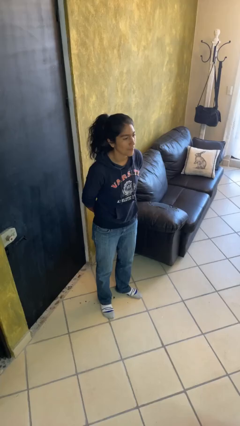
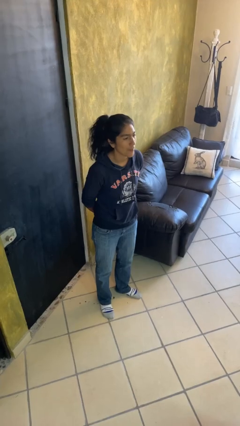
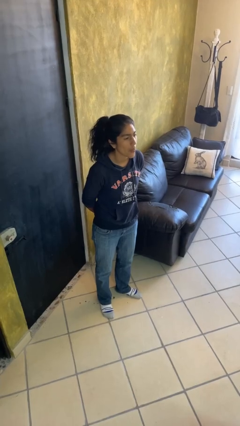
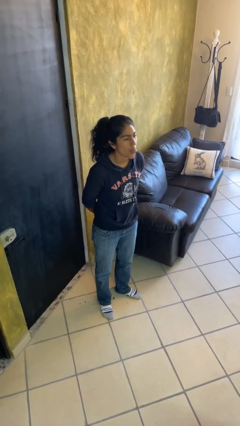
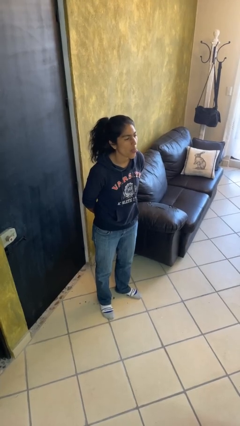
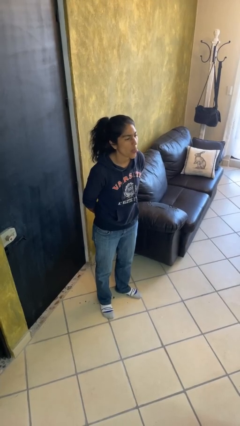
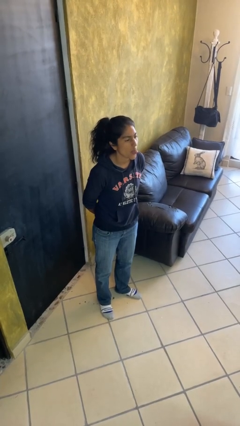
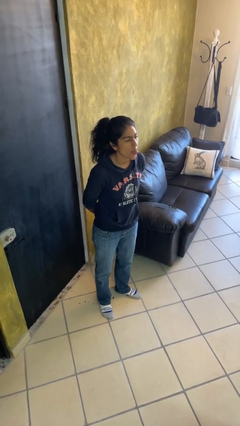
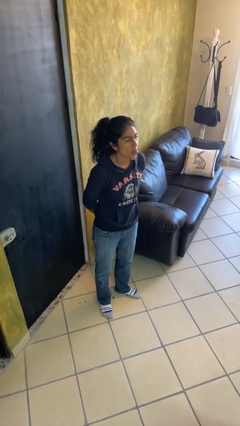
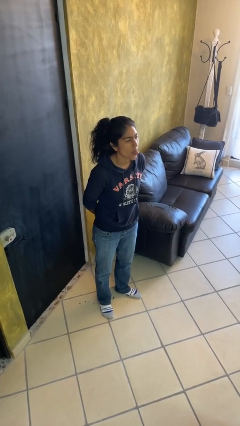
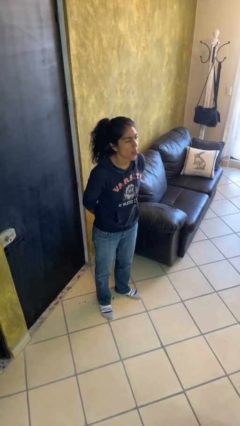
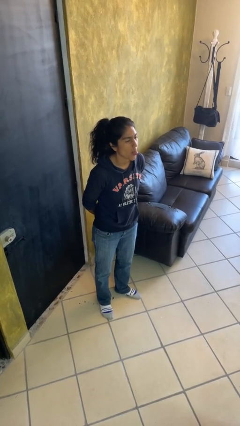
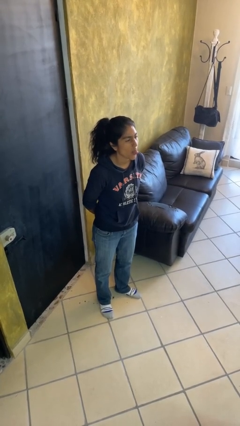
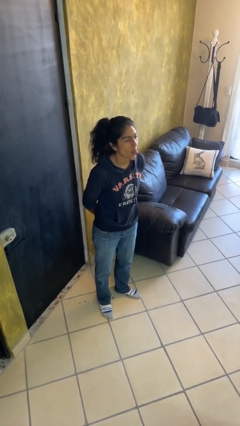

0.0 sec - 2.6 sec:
person sticks out tongue

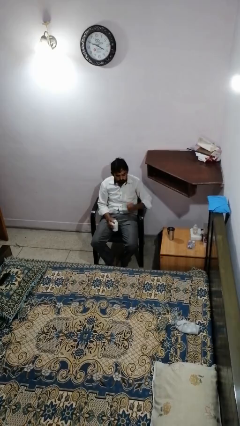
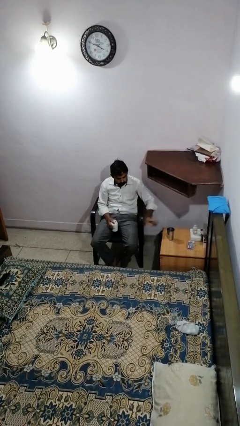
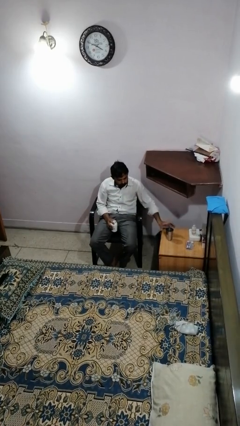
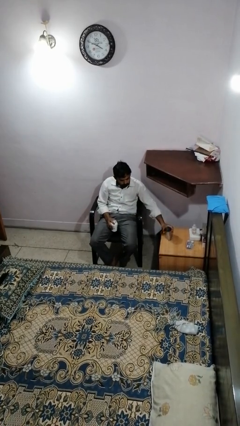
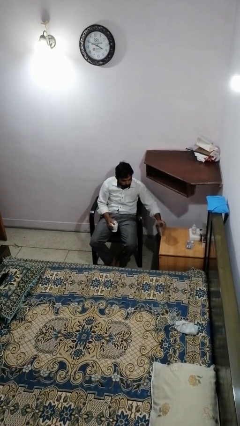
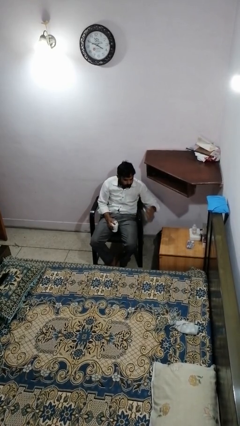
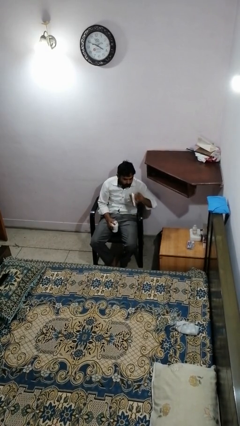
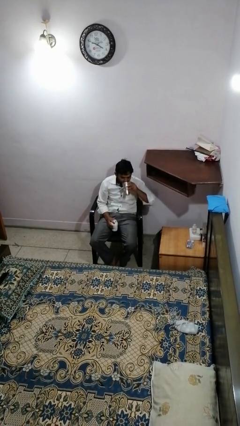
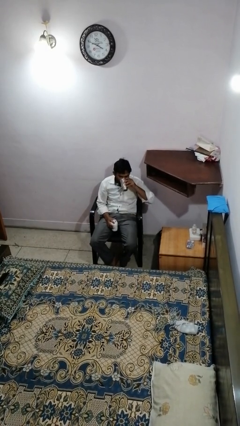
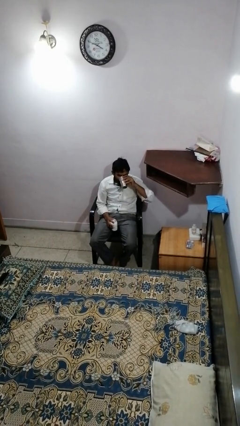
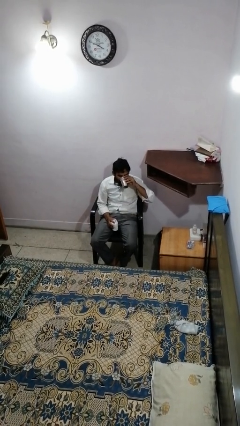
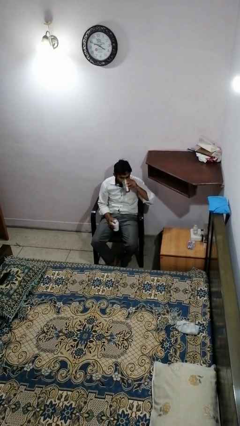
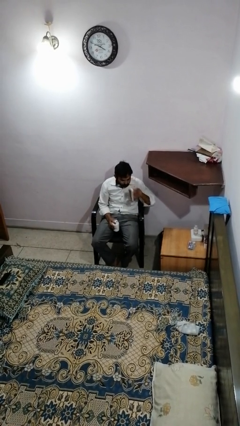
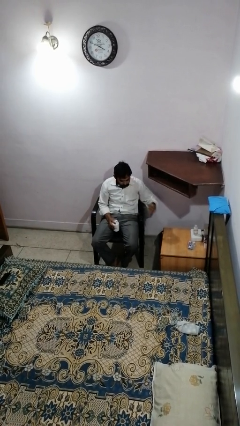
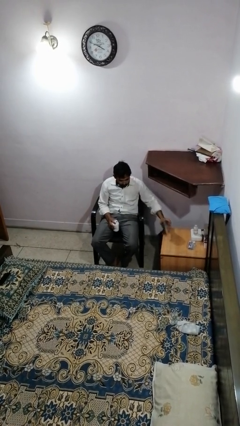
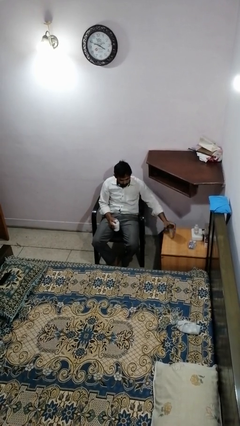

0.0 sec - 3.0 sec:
person drinks from cup

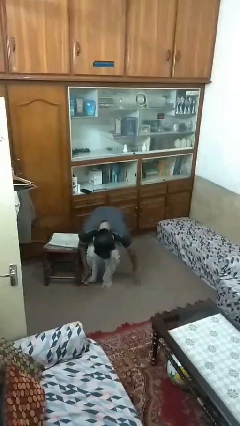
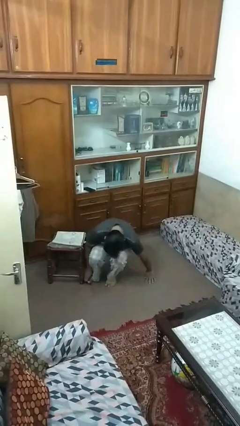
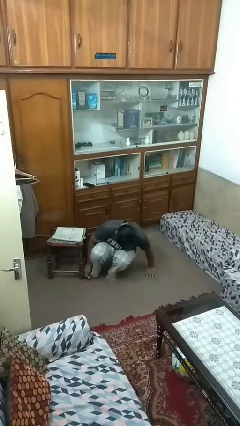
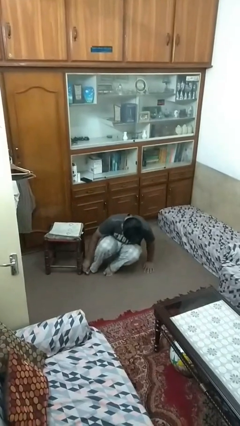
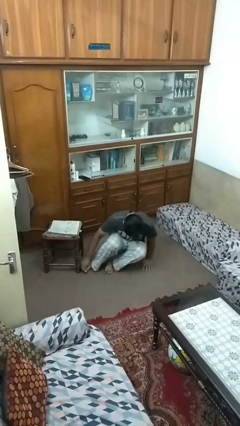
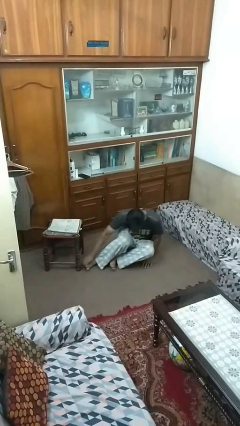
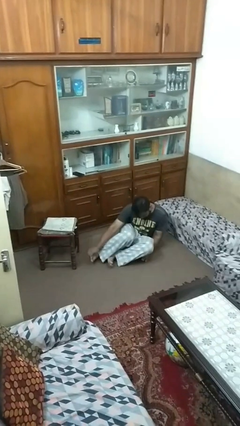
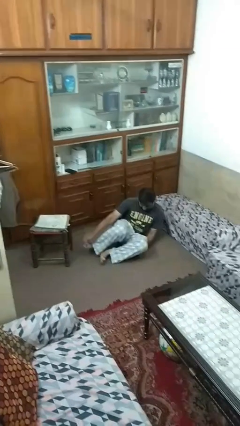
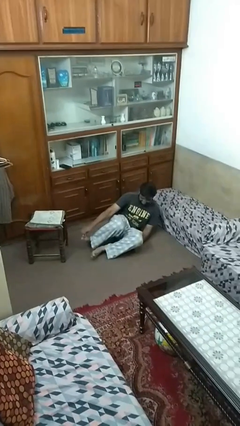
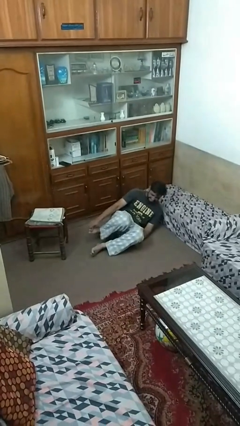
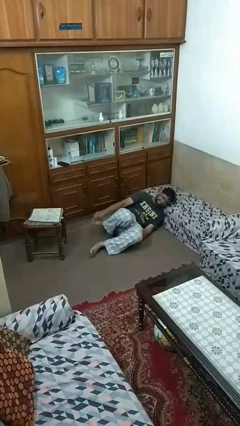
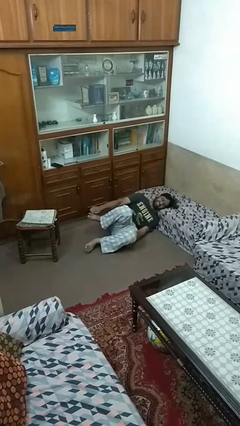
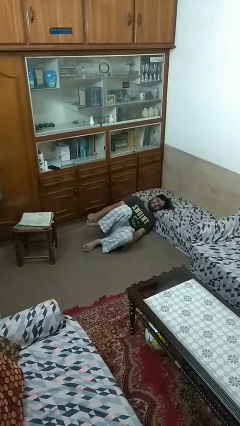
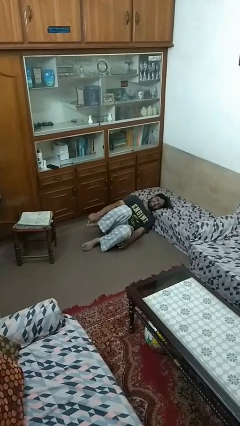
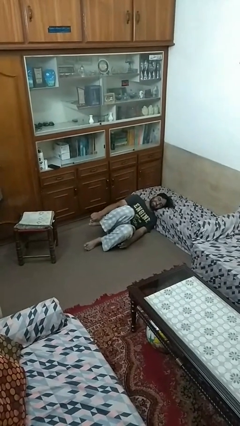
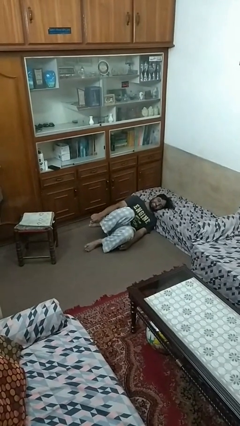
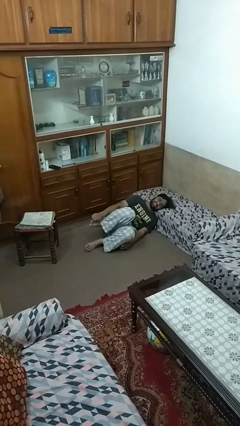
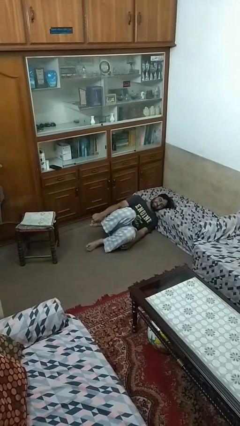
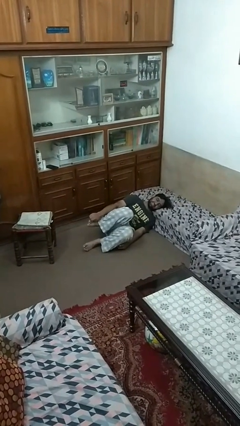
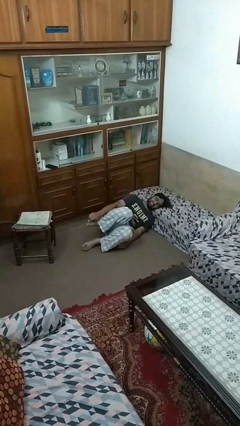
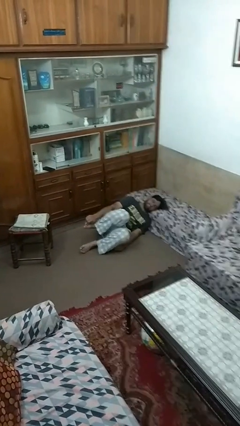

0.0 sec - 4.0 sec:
person lies down on floor

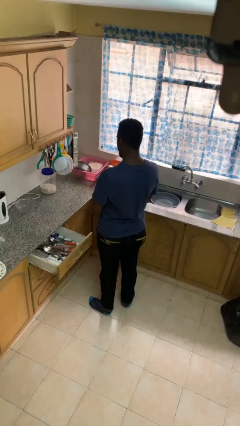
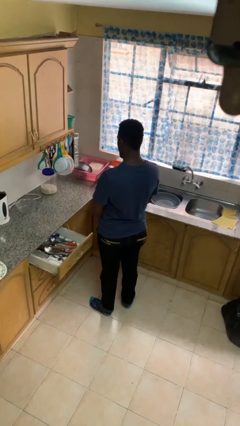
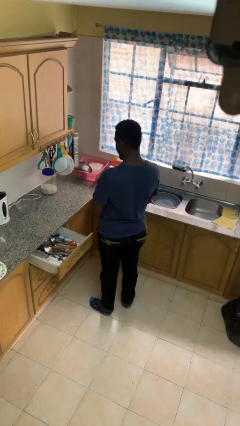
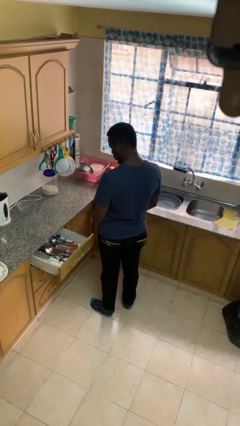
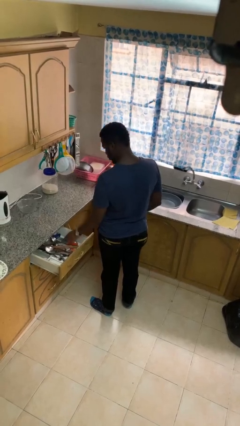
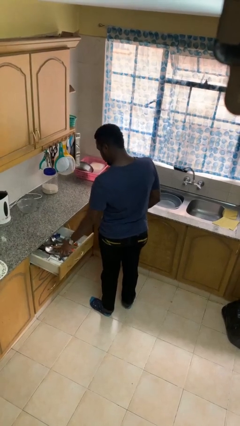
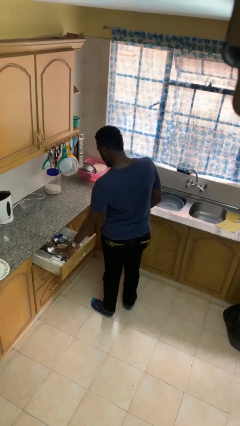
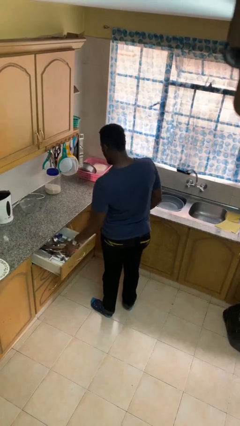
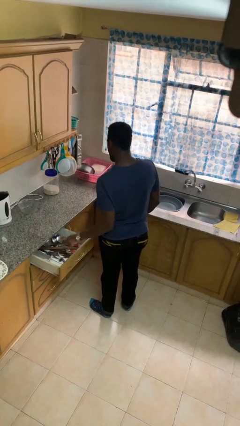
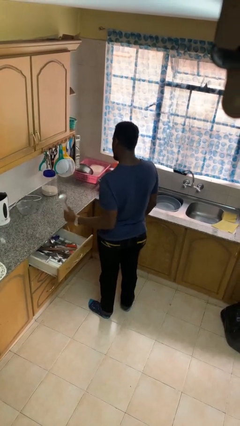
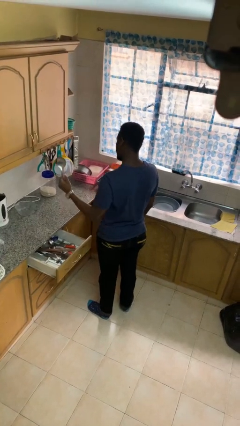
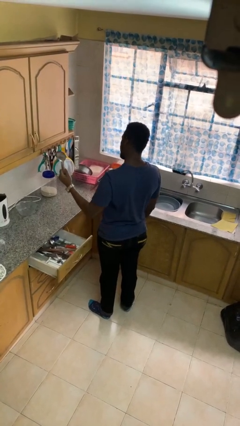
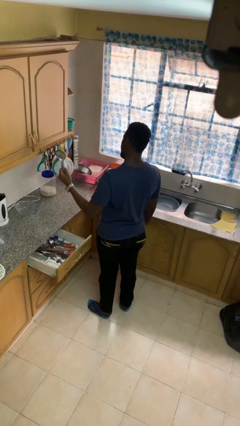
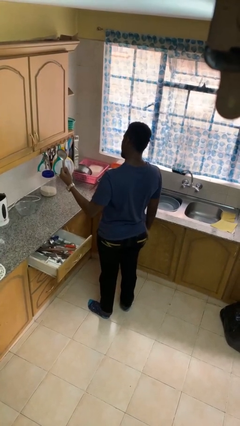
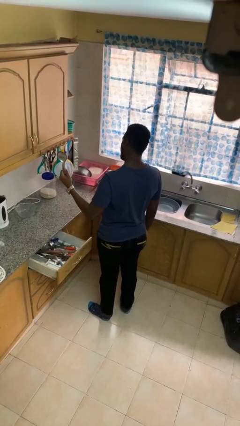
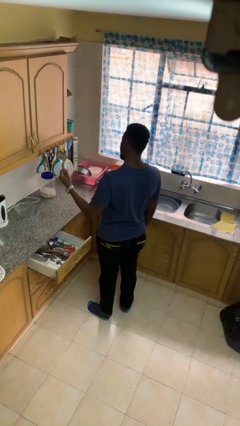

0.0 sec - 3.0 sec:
person takes object from kitchen drawer

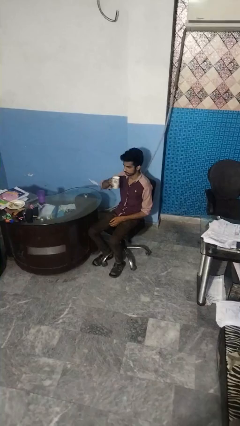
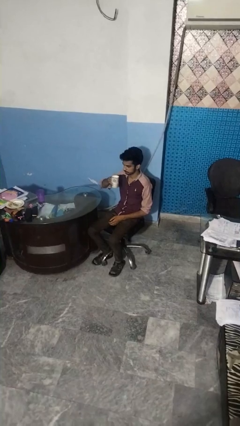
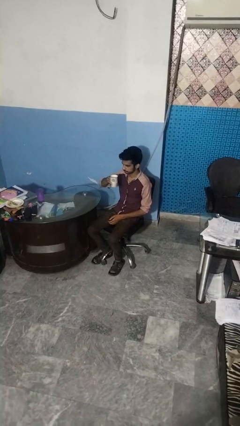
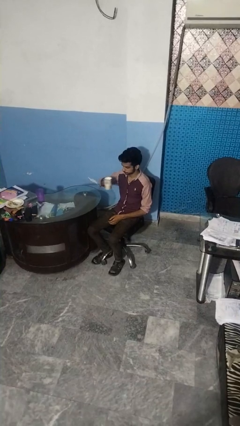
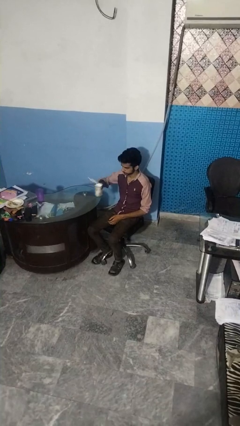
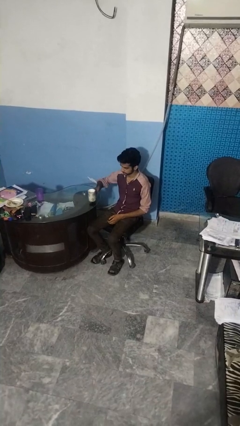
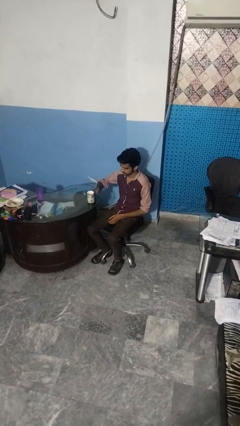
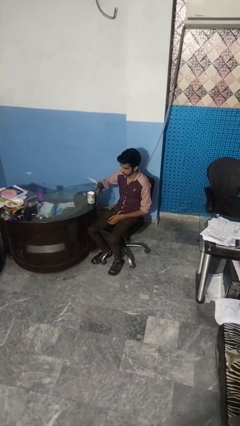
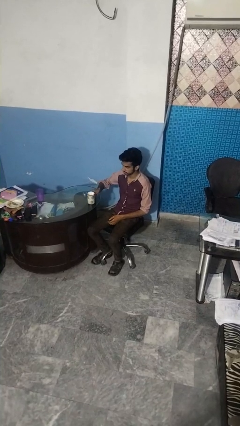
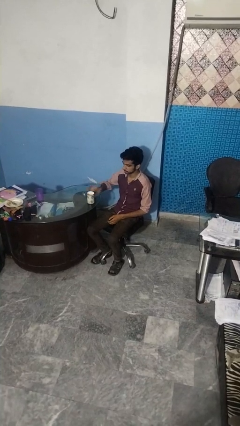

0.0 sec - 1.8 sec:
person puts down object on table

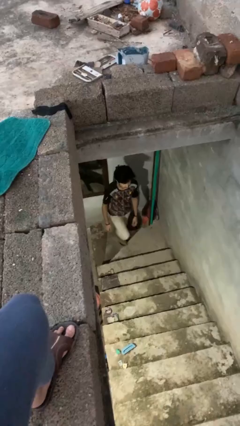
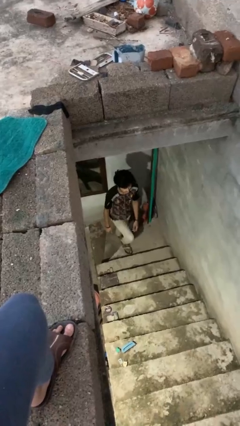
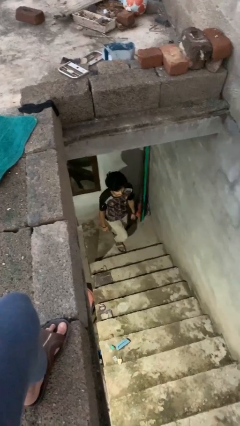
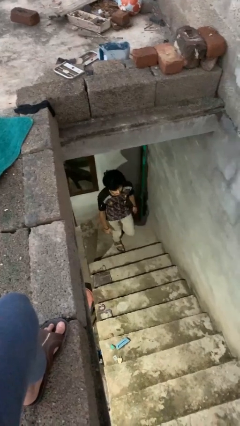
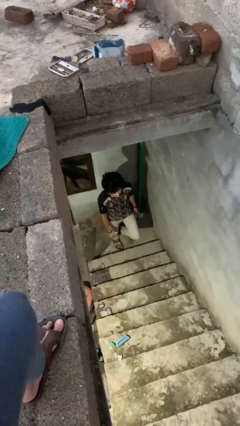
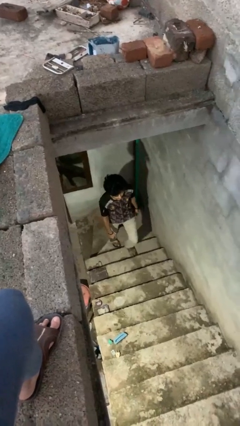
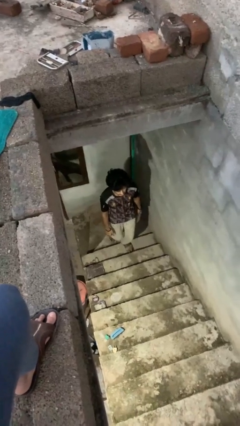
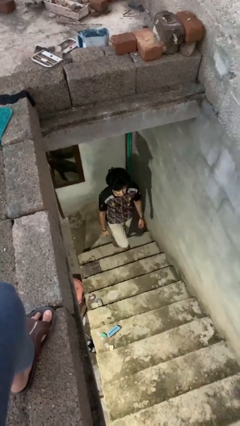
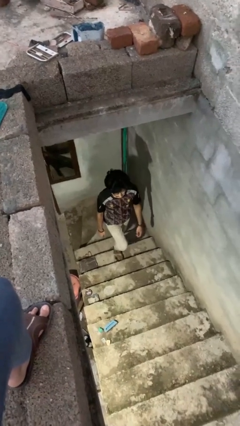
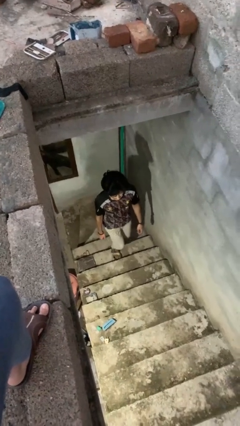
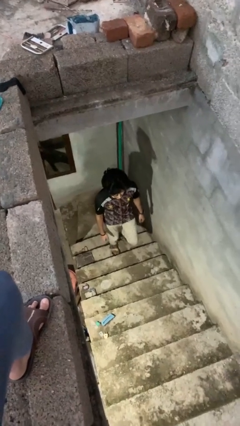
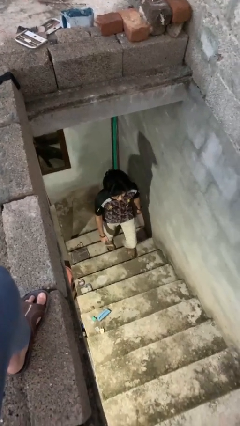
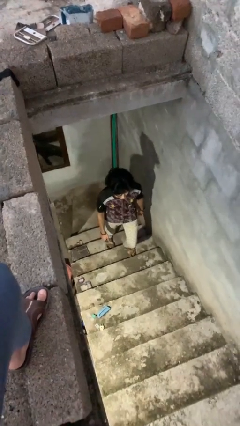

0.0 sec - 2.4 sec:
person climbs up stairs

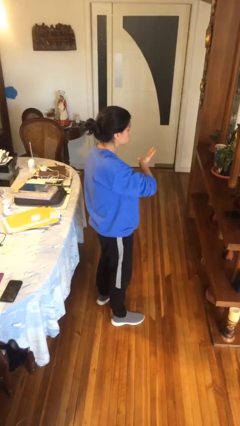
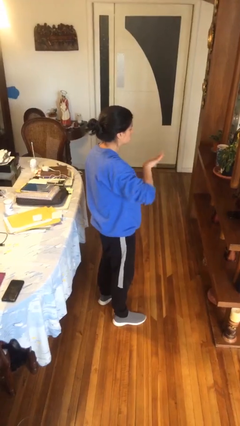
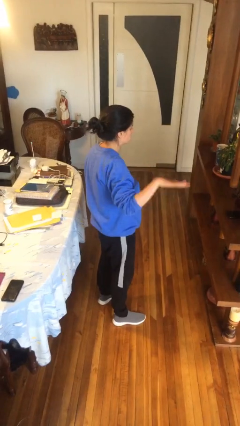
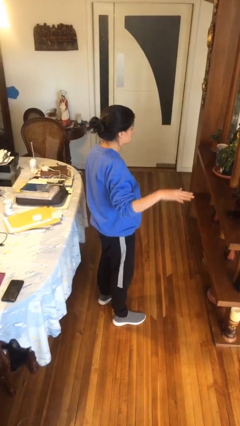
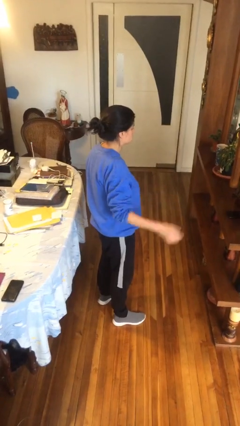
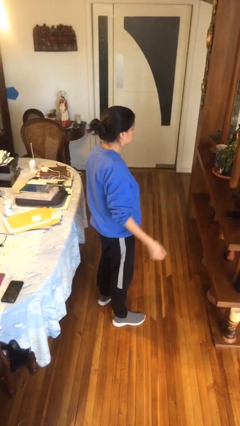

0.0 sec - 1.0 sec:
person gestures swipe right
